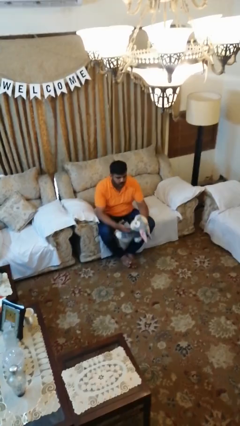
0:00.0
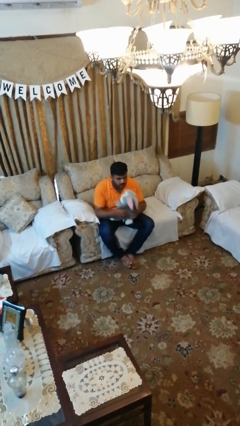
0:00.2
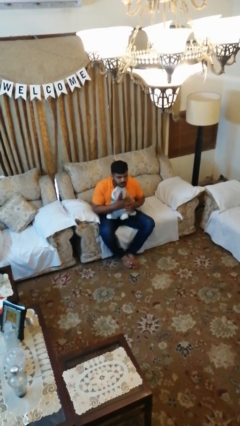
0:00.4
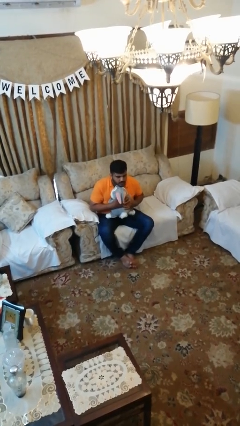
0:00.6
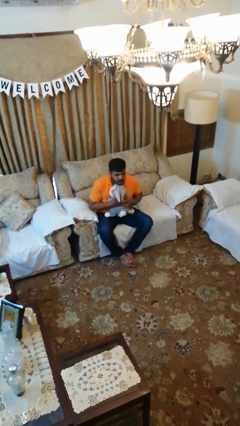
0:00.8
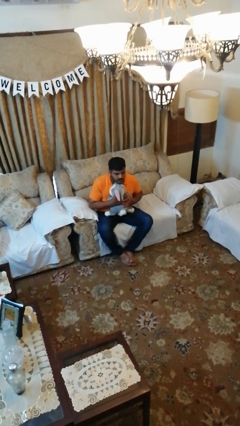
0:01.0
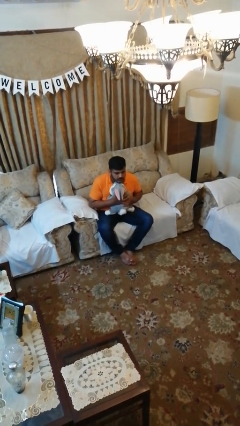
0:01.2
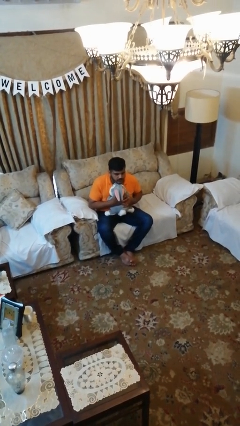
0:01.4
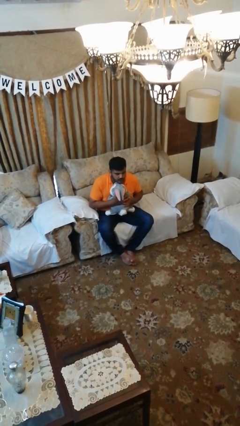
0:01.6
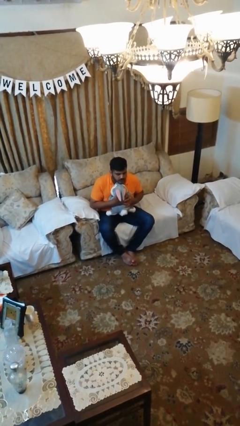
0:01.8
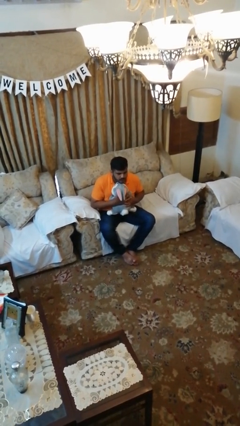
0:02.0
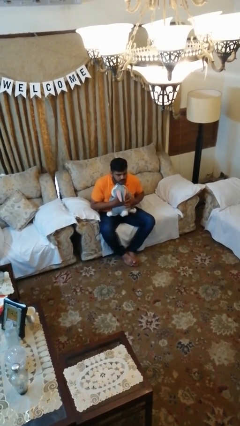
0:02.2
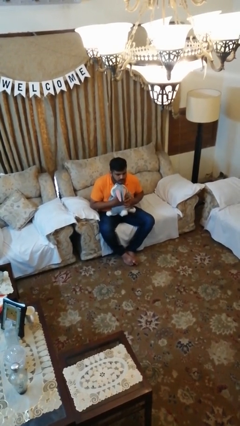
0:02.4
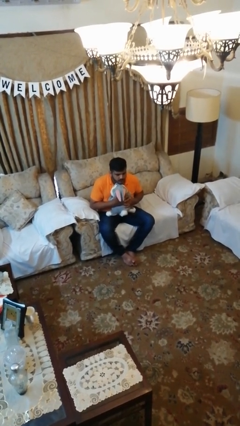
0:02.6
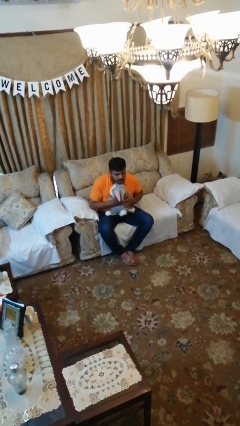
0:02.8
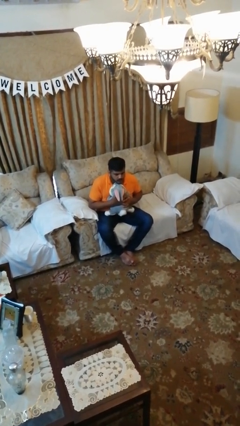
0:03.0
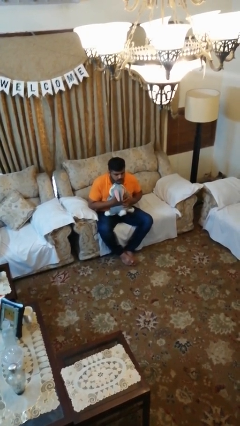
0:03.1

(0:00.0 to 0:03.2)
person hugs stuffed animal

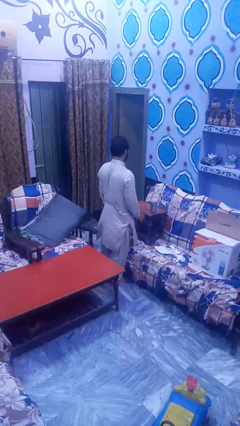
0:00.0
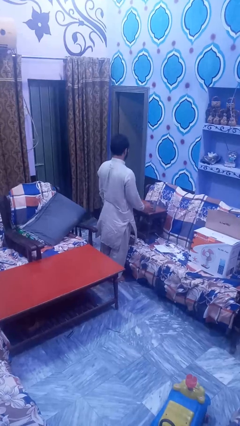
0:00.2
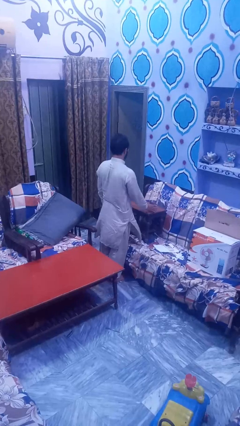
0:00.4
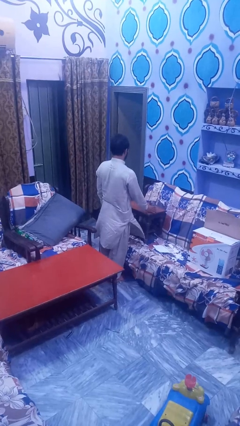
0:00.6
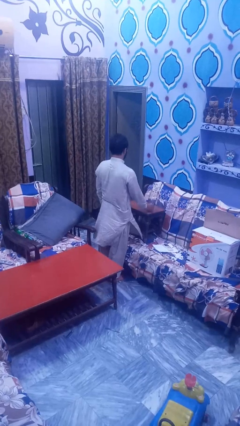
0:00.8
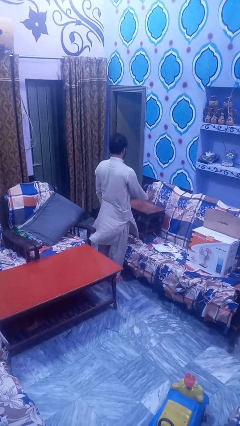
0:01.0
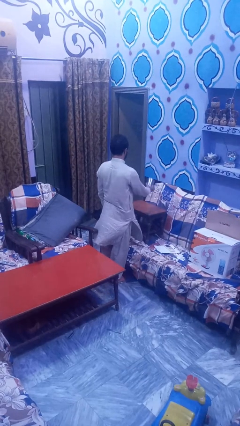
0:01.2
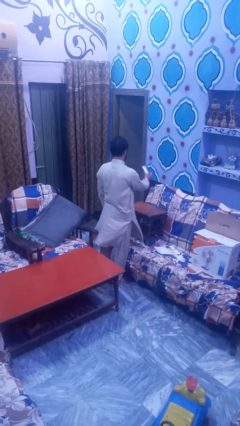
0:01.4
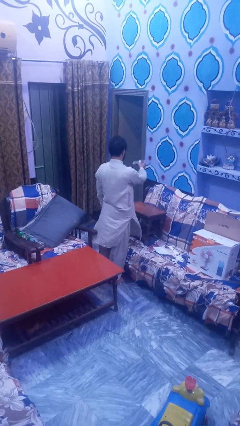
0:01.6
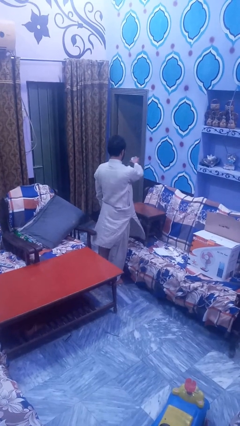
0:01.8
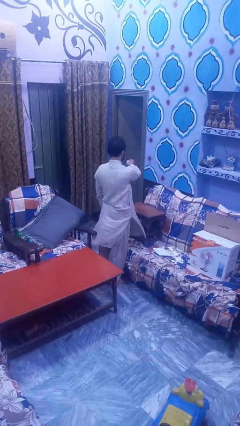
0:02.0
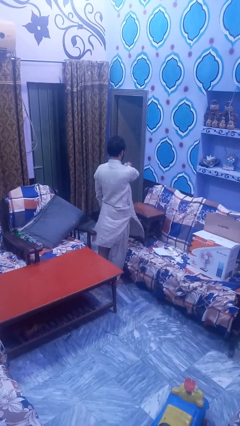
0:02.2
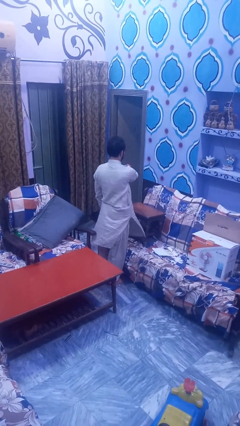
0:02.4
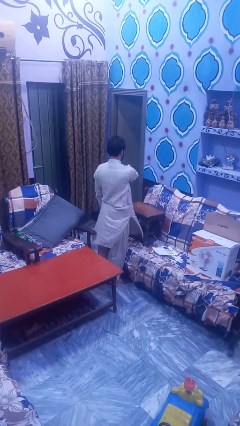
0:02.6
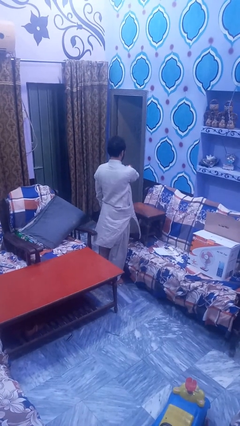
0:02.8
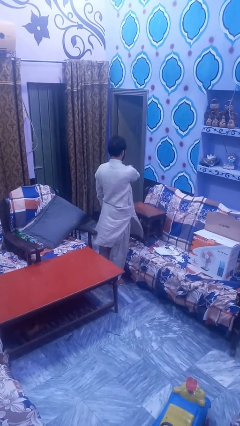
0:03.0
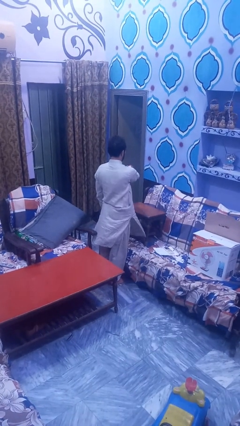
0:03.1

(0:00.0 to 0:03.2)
person spills on table

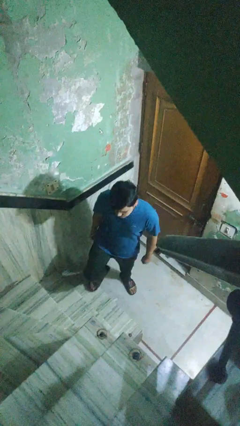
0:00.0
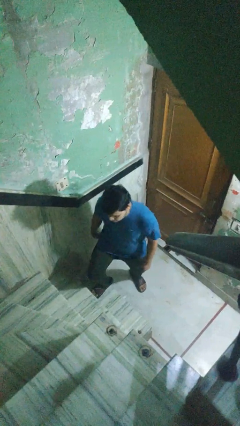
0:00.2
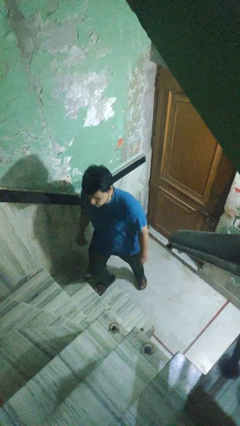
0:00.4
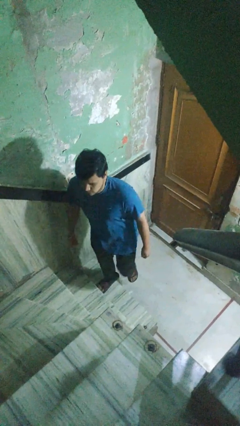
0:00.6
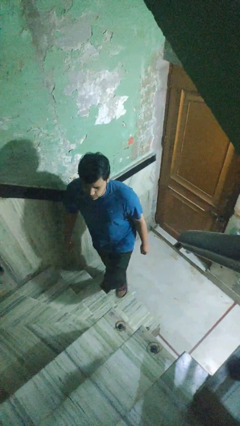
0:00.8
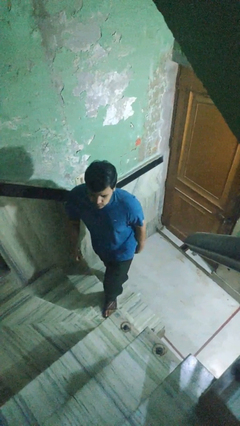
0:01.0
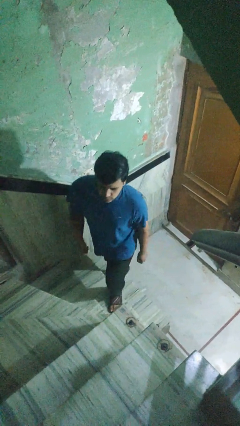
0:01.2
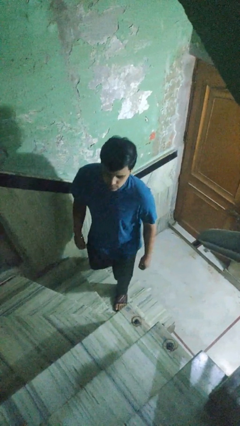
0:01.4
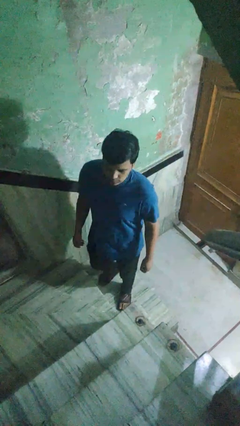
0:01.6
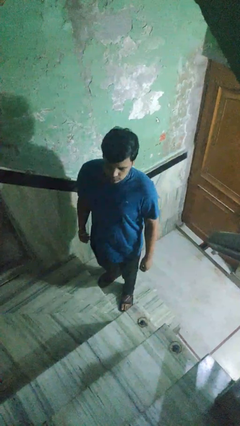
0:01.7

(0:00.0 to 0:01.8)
person climbs up stairs

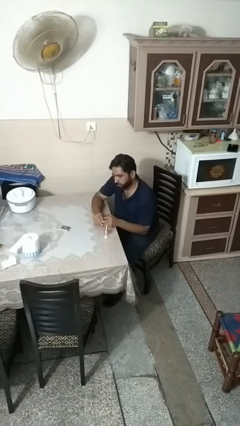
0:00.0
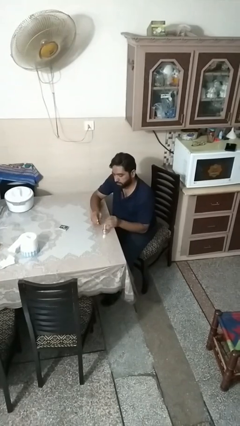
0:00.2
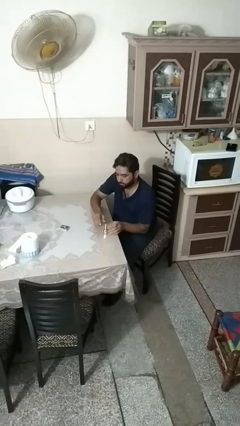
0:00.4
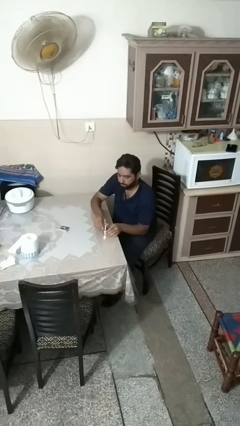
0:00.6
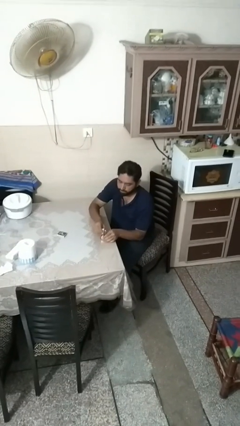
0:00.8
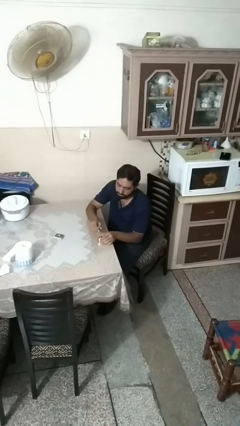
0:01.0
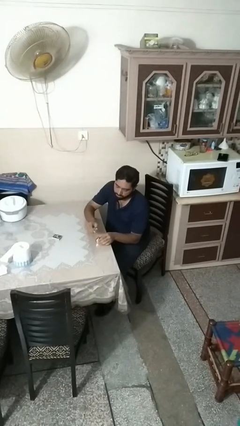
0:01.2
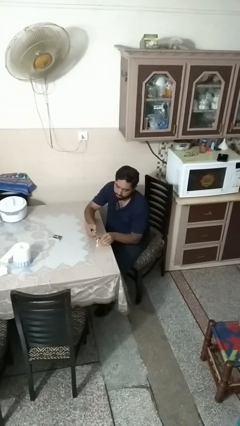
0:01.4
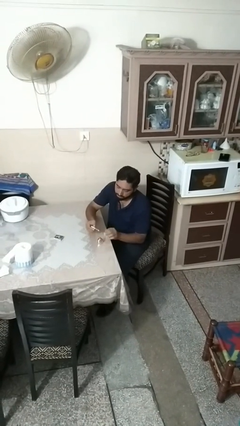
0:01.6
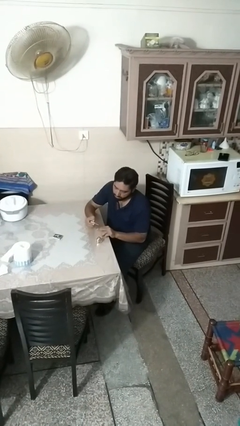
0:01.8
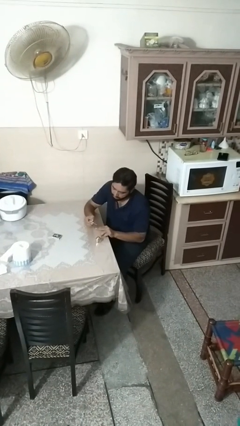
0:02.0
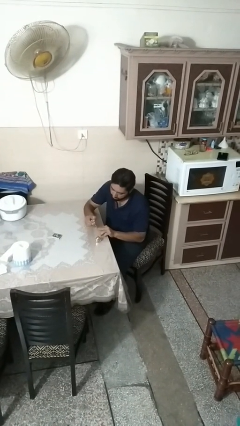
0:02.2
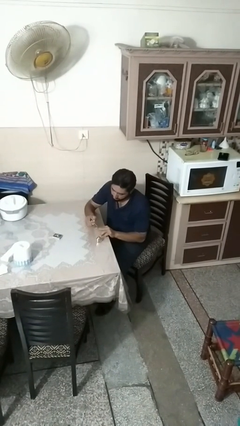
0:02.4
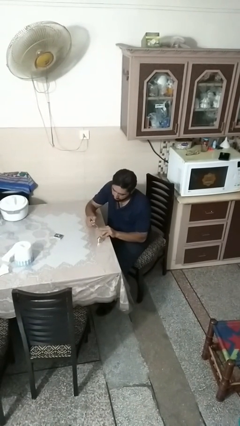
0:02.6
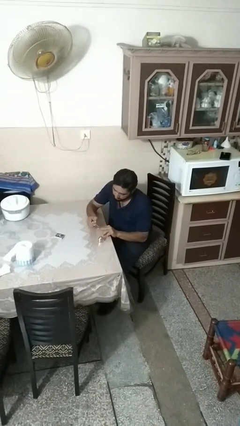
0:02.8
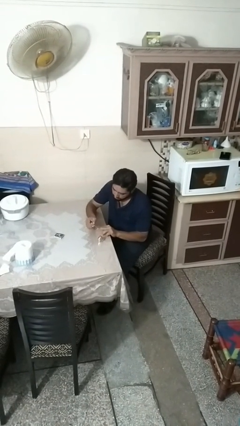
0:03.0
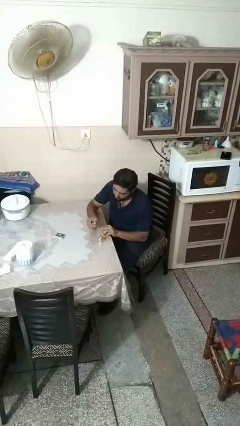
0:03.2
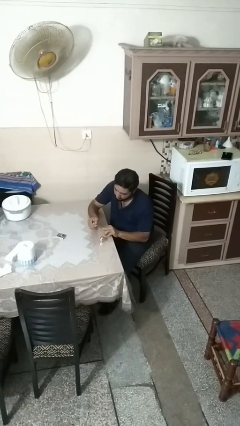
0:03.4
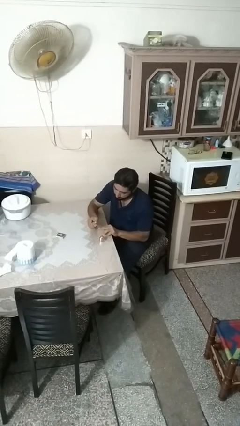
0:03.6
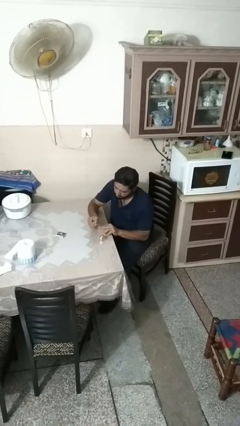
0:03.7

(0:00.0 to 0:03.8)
person paints fingernails

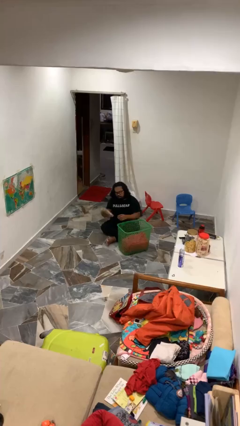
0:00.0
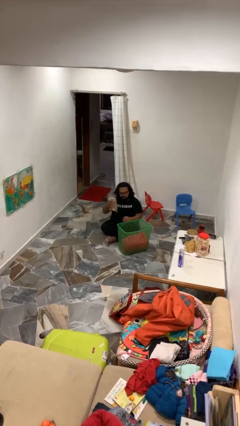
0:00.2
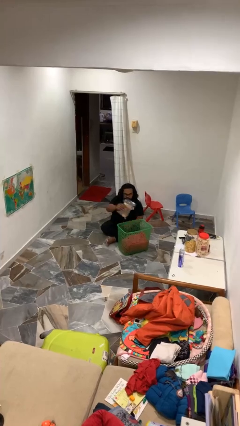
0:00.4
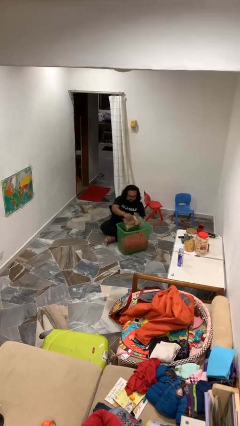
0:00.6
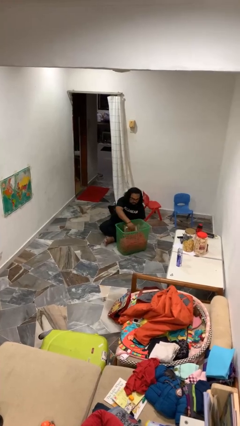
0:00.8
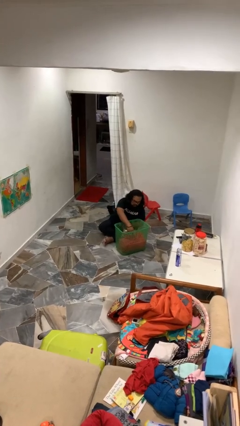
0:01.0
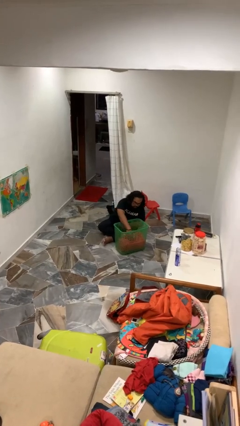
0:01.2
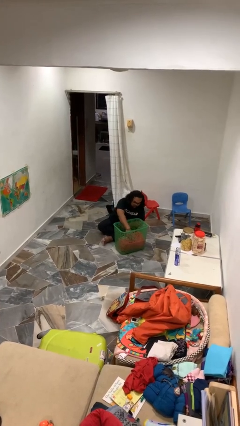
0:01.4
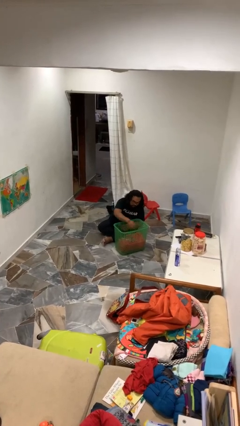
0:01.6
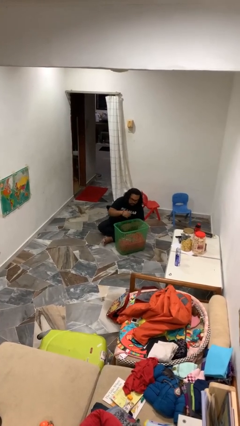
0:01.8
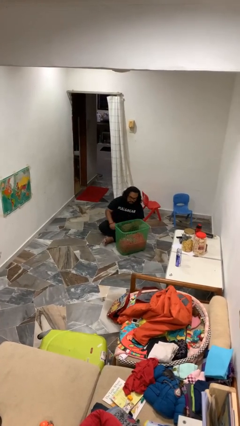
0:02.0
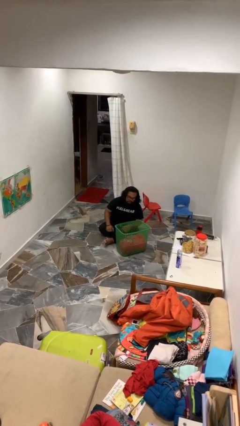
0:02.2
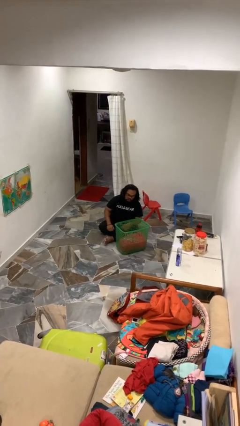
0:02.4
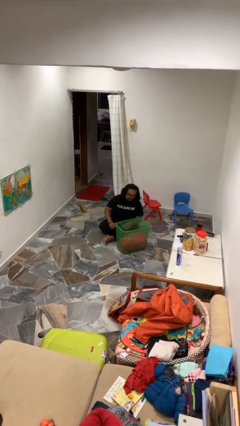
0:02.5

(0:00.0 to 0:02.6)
person puts object into basket

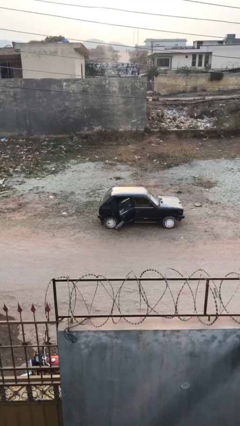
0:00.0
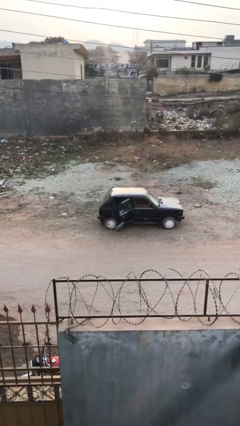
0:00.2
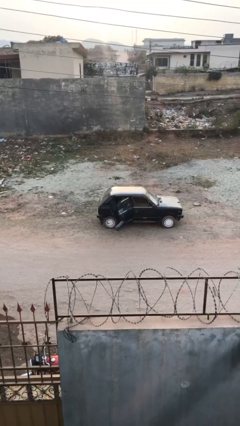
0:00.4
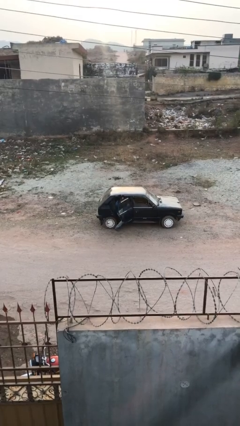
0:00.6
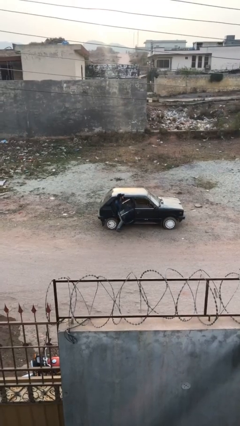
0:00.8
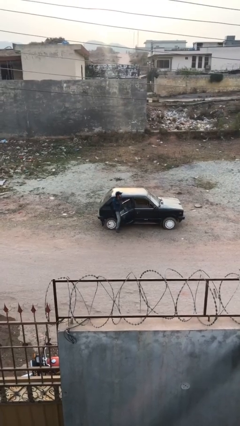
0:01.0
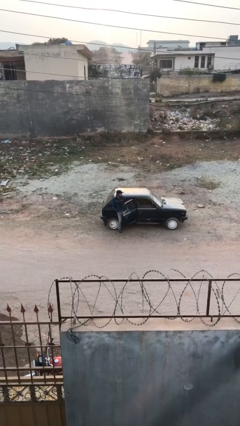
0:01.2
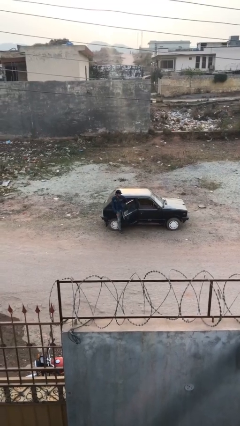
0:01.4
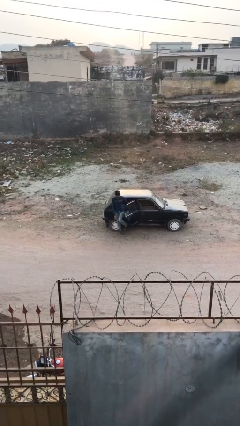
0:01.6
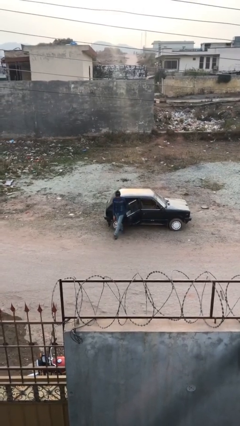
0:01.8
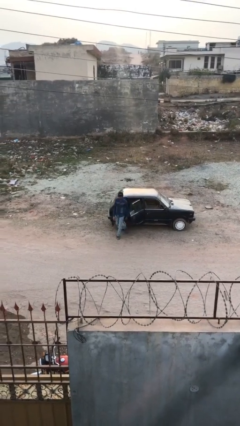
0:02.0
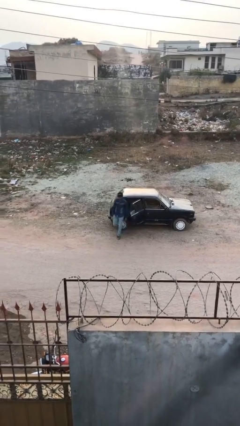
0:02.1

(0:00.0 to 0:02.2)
person exits car

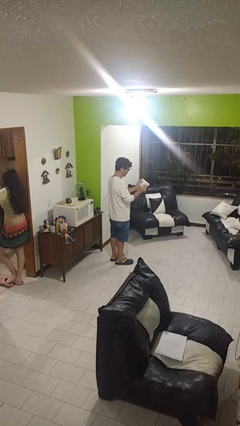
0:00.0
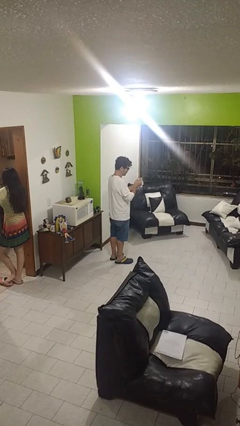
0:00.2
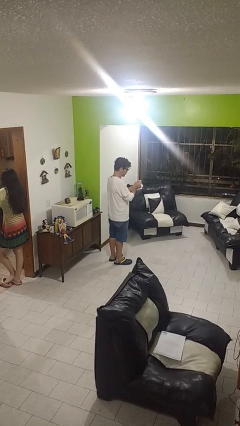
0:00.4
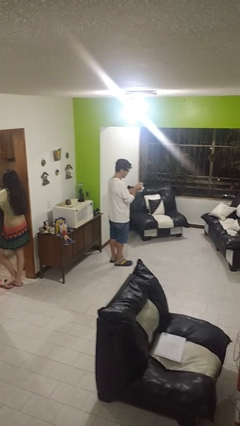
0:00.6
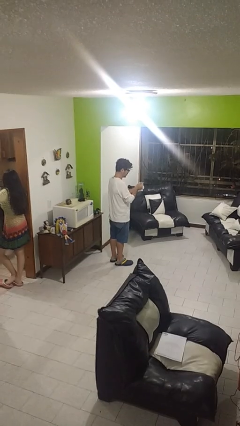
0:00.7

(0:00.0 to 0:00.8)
person crumples paper
